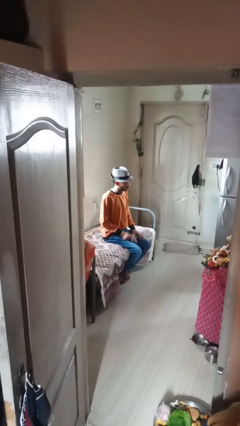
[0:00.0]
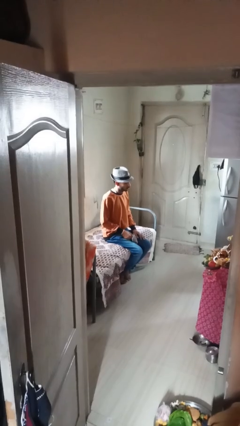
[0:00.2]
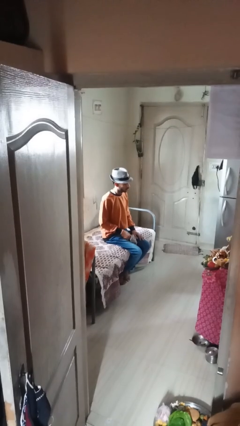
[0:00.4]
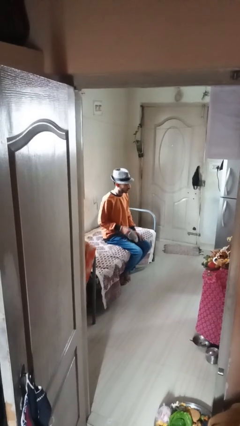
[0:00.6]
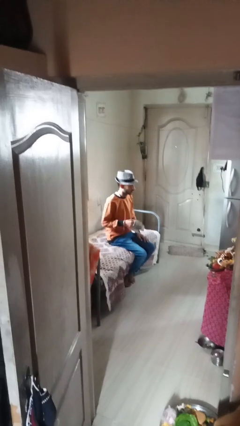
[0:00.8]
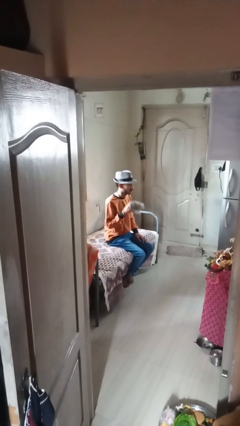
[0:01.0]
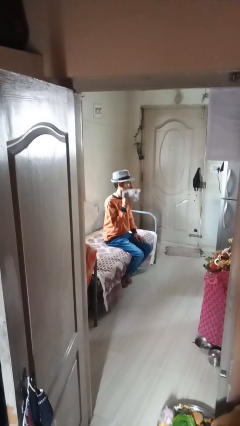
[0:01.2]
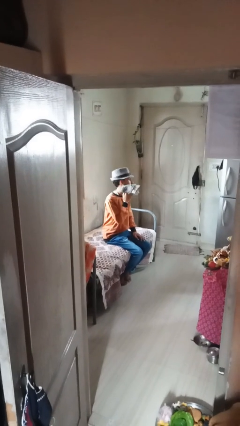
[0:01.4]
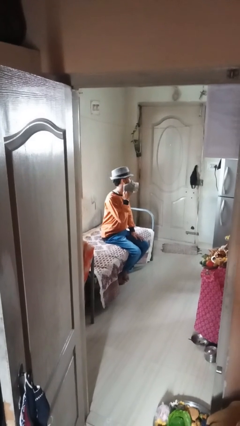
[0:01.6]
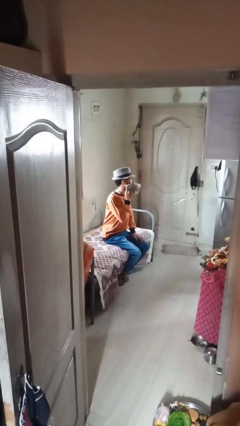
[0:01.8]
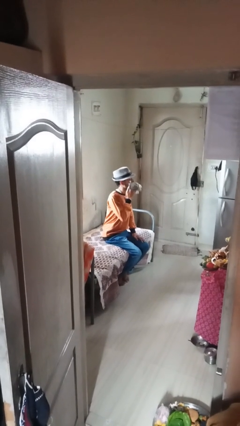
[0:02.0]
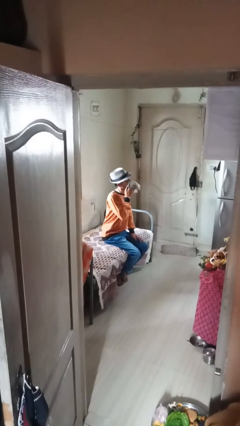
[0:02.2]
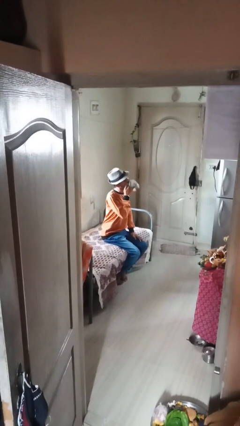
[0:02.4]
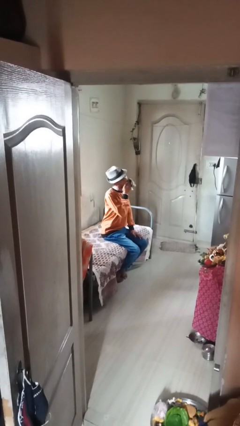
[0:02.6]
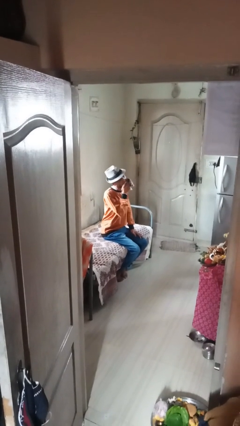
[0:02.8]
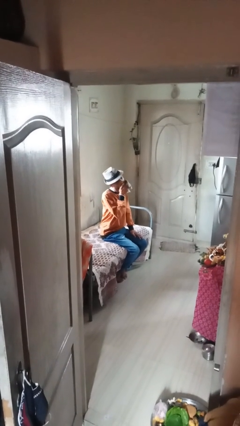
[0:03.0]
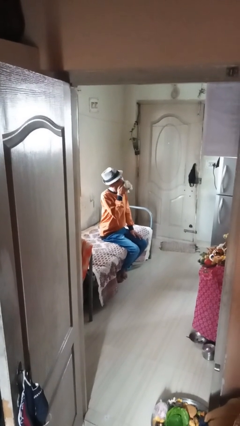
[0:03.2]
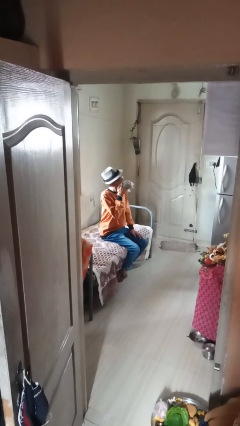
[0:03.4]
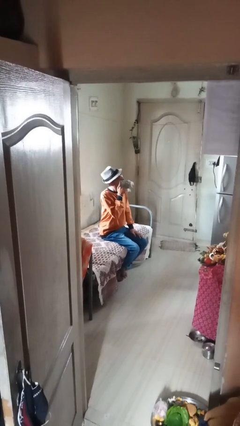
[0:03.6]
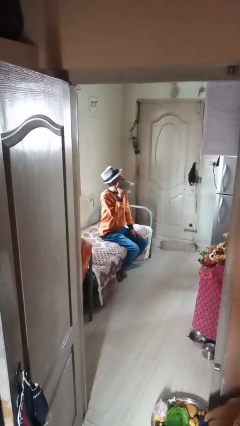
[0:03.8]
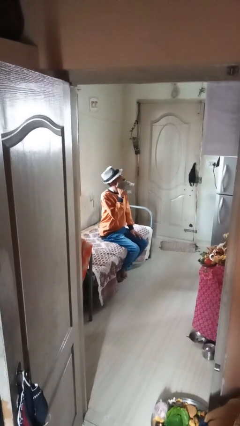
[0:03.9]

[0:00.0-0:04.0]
person wipes mouth with napkin

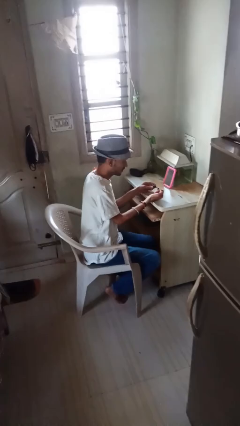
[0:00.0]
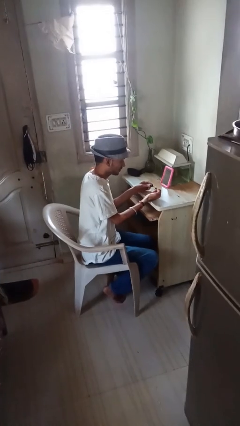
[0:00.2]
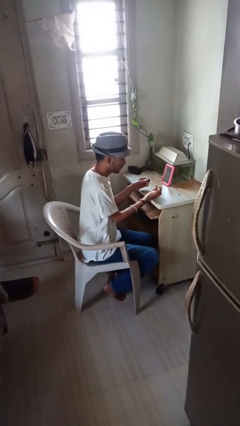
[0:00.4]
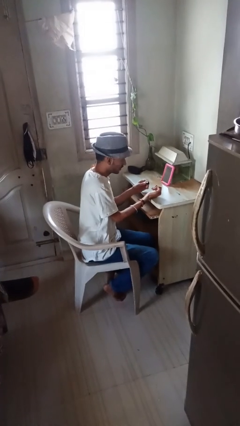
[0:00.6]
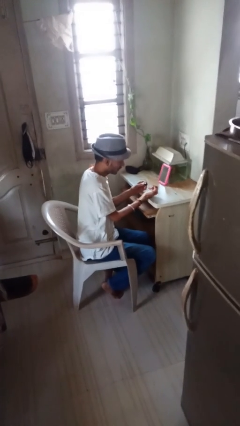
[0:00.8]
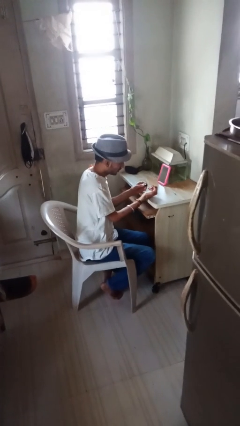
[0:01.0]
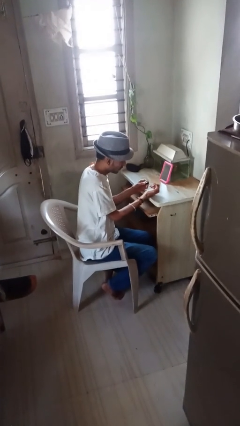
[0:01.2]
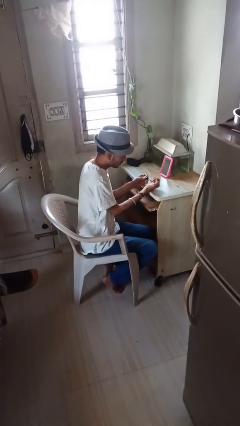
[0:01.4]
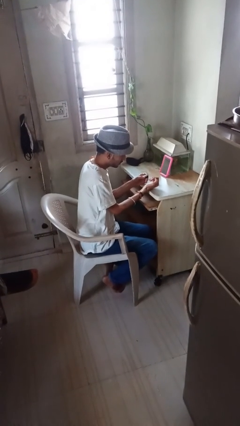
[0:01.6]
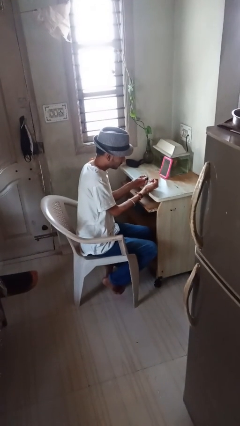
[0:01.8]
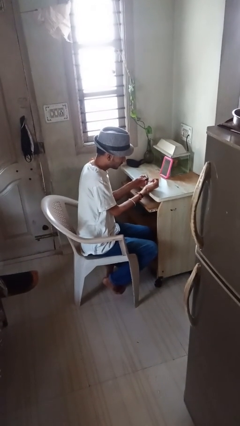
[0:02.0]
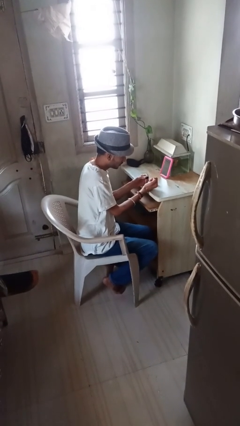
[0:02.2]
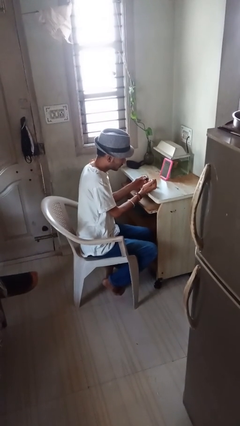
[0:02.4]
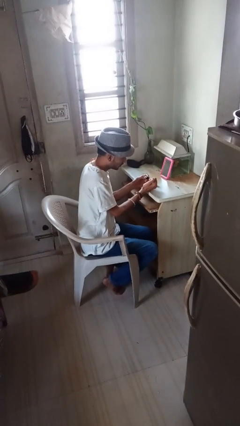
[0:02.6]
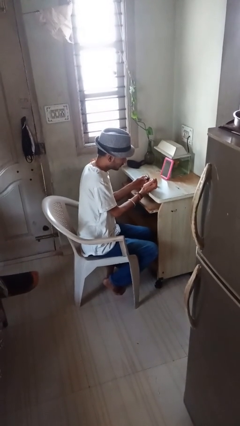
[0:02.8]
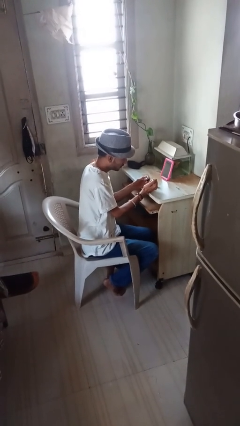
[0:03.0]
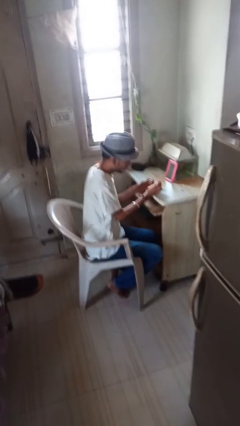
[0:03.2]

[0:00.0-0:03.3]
person paints fingernails

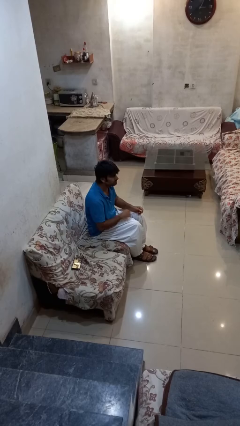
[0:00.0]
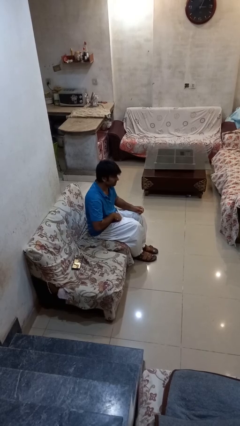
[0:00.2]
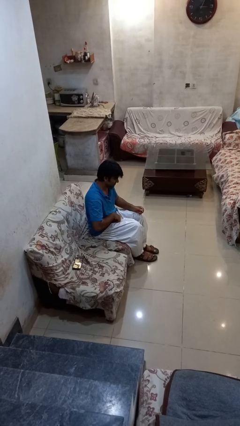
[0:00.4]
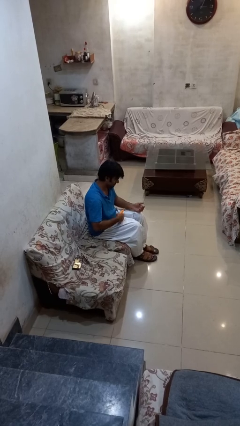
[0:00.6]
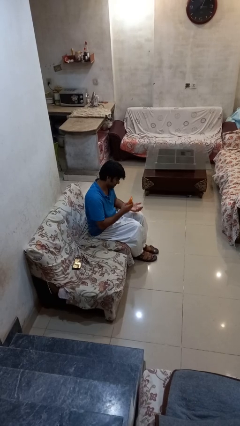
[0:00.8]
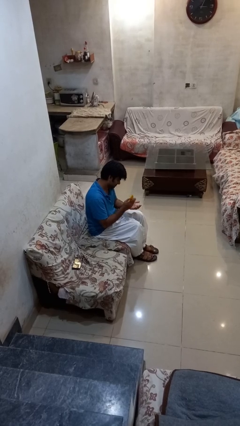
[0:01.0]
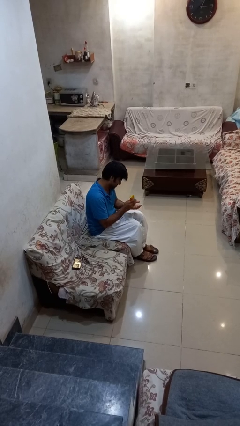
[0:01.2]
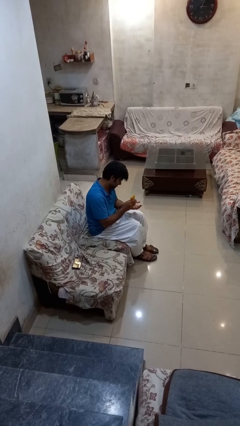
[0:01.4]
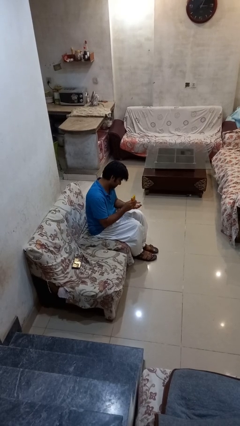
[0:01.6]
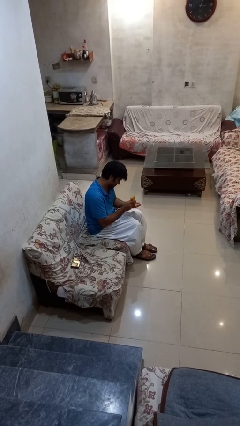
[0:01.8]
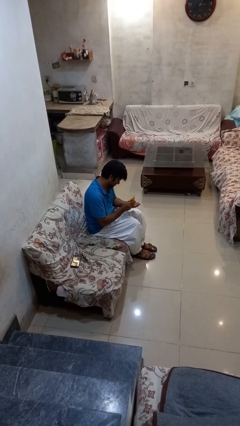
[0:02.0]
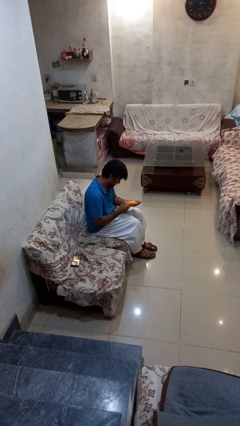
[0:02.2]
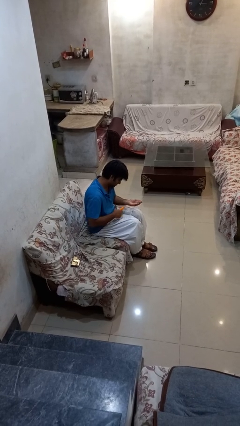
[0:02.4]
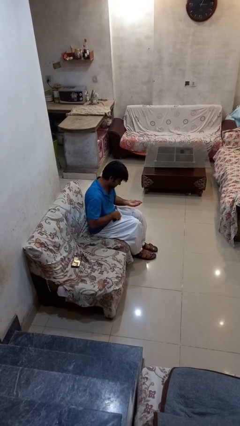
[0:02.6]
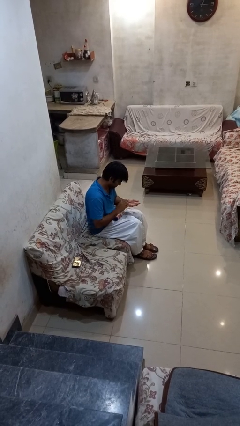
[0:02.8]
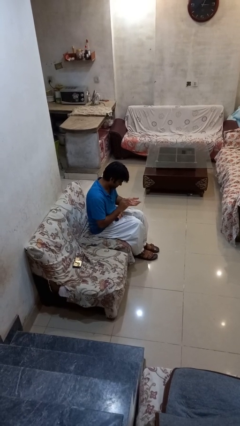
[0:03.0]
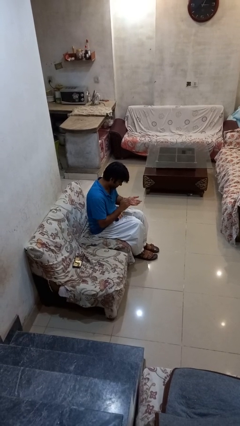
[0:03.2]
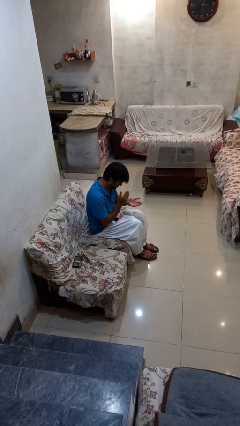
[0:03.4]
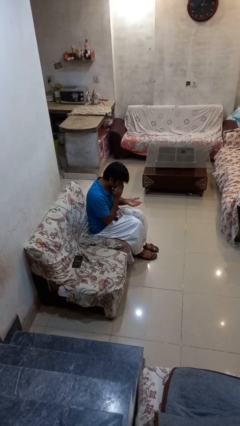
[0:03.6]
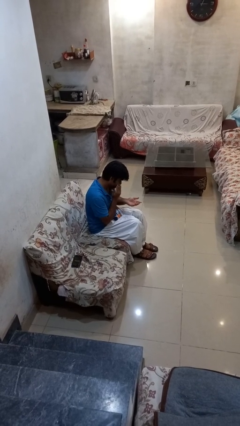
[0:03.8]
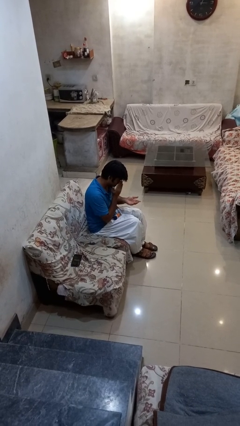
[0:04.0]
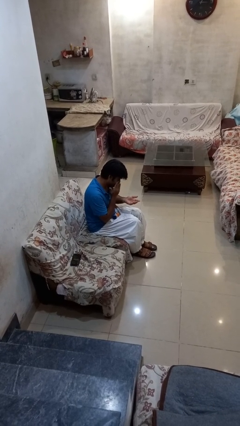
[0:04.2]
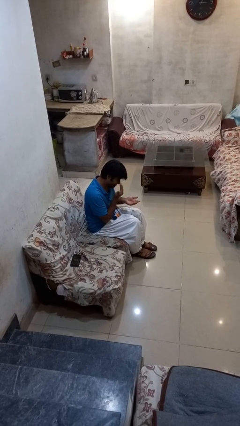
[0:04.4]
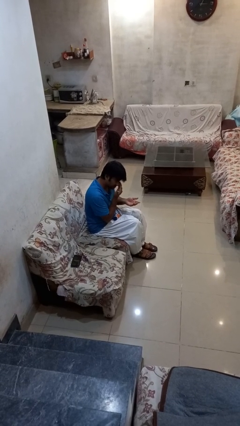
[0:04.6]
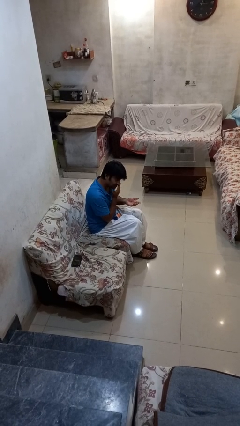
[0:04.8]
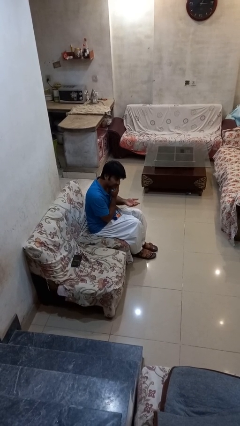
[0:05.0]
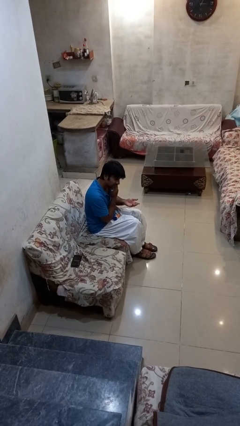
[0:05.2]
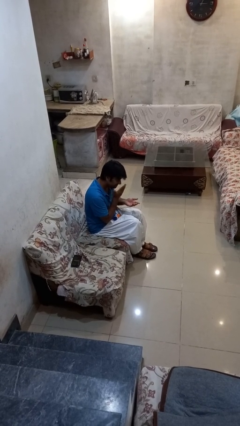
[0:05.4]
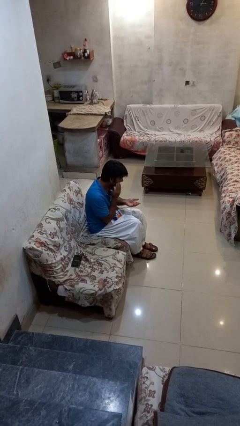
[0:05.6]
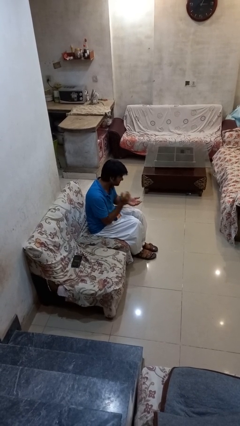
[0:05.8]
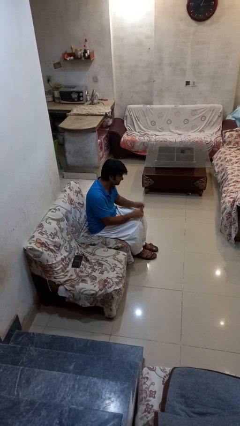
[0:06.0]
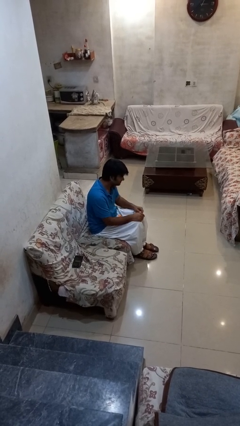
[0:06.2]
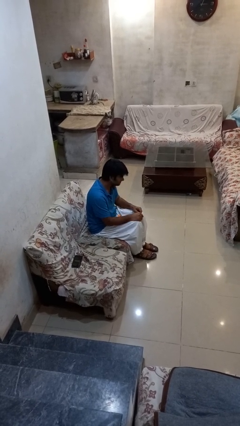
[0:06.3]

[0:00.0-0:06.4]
person applies facial moisturizer

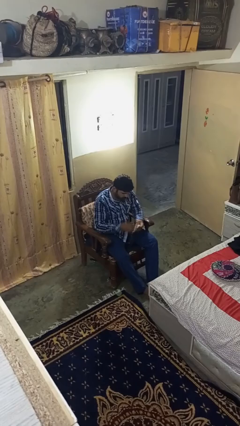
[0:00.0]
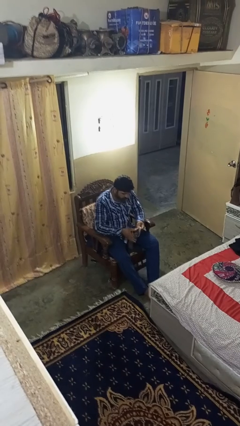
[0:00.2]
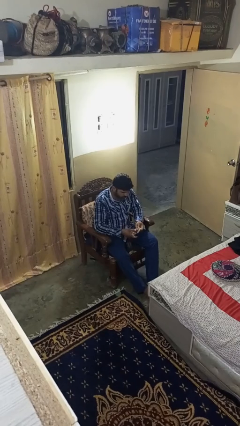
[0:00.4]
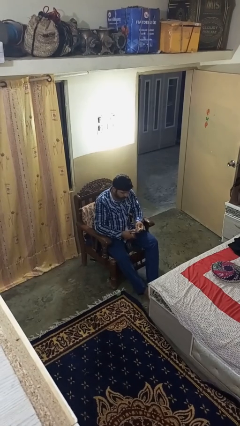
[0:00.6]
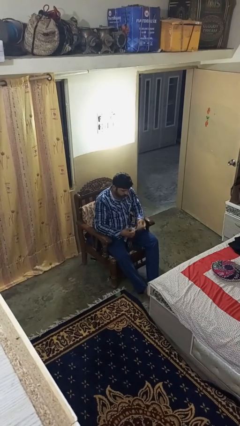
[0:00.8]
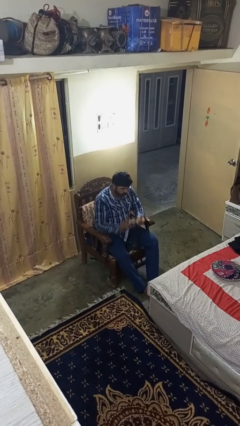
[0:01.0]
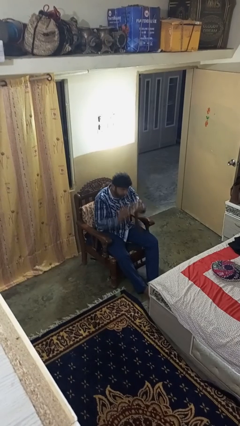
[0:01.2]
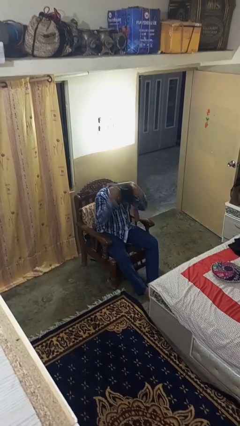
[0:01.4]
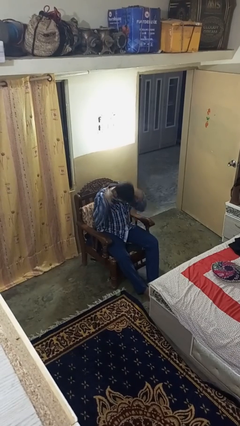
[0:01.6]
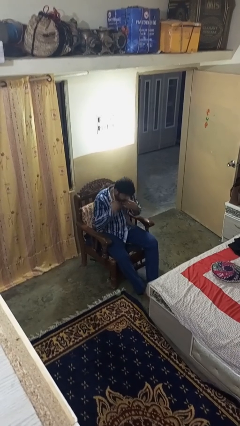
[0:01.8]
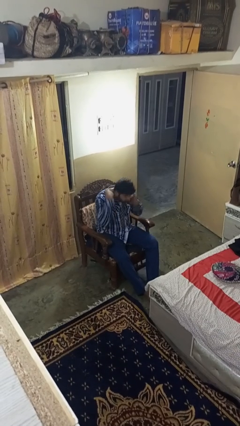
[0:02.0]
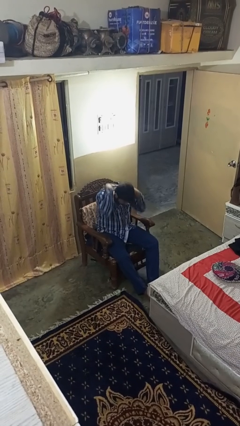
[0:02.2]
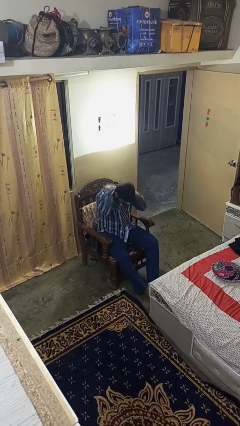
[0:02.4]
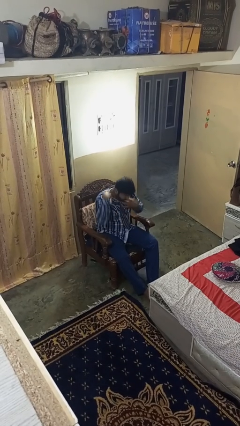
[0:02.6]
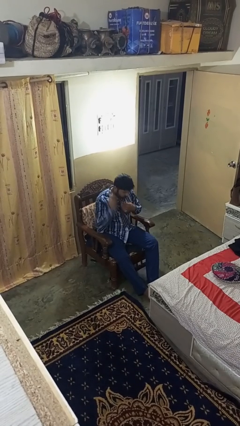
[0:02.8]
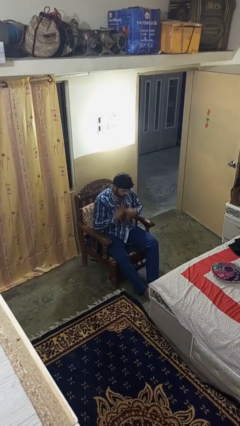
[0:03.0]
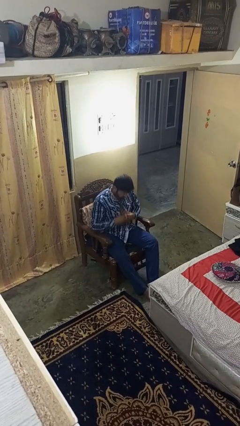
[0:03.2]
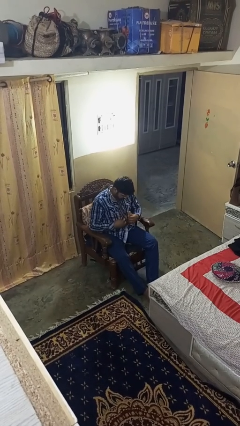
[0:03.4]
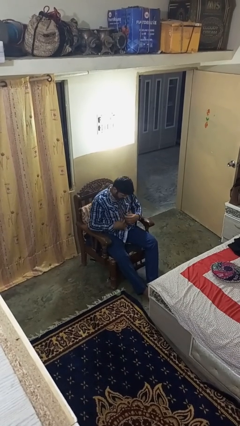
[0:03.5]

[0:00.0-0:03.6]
person puts on necktie

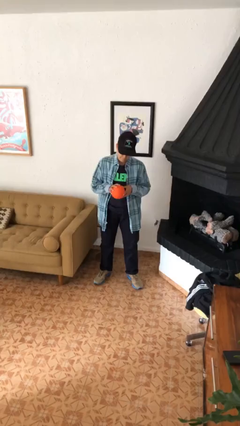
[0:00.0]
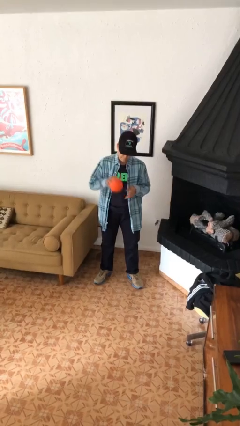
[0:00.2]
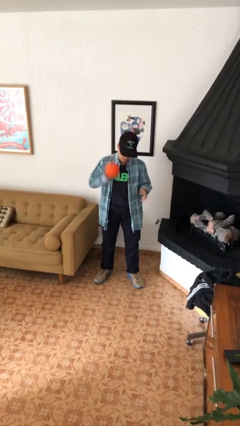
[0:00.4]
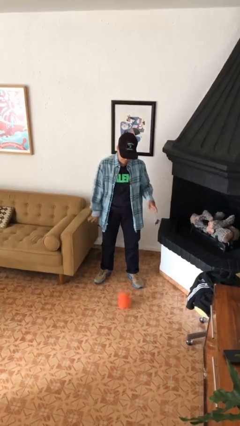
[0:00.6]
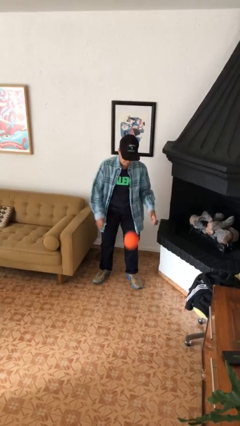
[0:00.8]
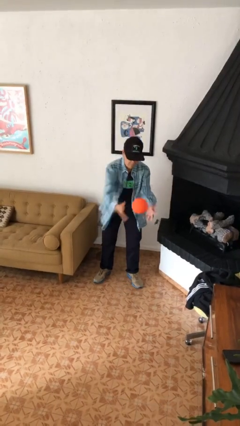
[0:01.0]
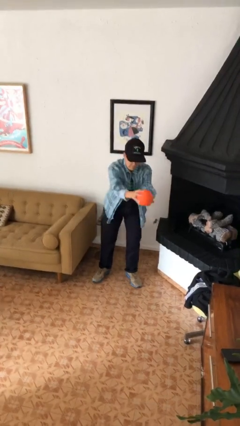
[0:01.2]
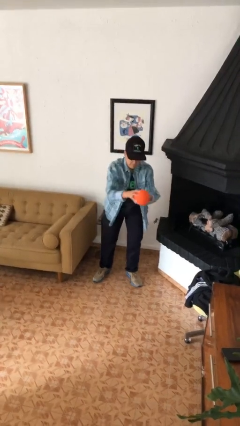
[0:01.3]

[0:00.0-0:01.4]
person bounces ball on floor
